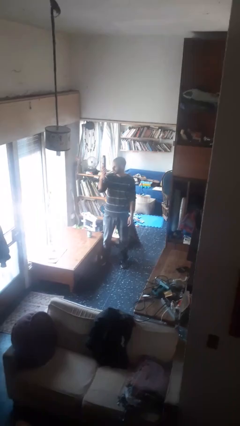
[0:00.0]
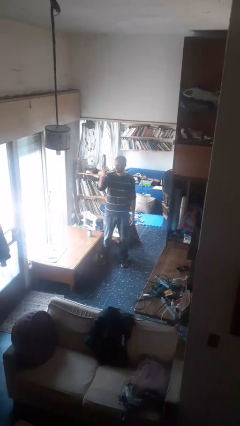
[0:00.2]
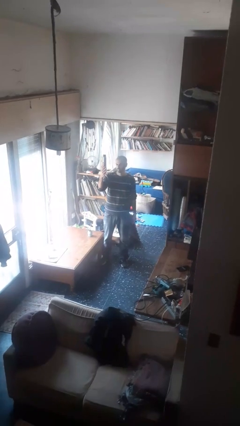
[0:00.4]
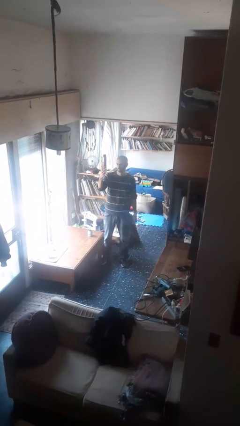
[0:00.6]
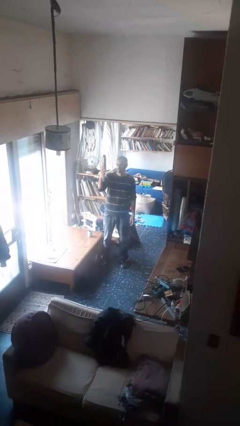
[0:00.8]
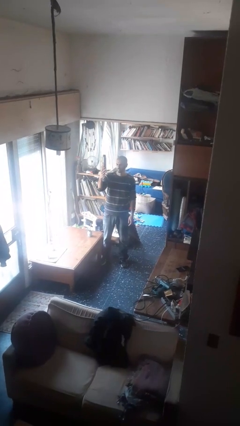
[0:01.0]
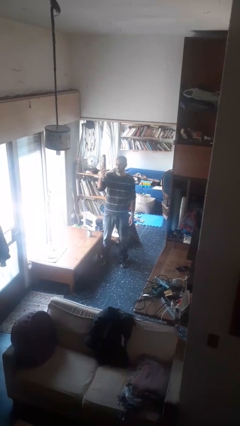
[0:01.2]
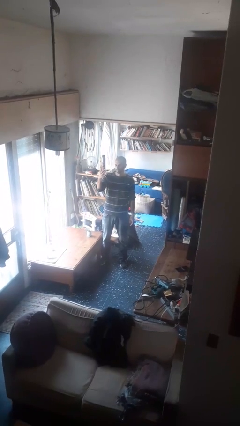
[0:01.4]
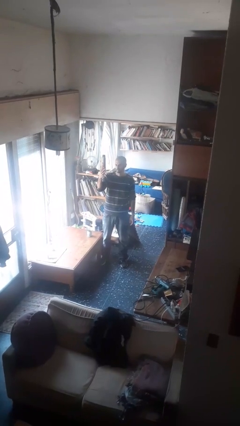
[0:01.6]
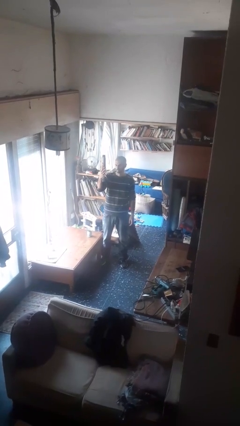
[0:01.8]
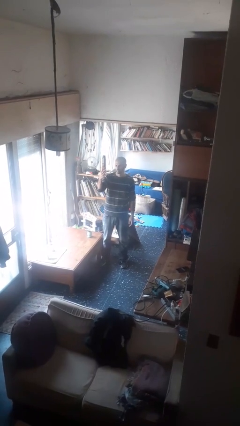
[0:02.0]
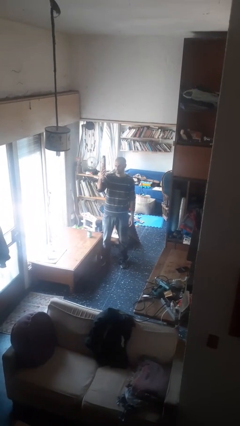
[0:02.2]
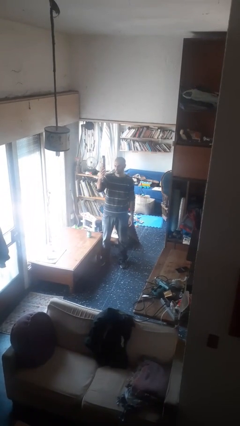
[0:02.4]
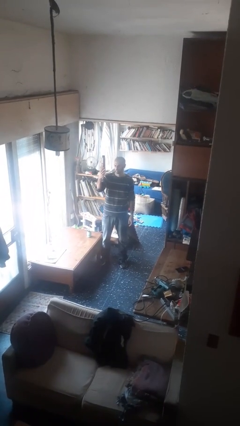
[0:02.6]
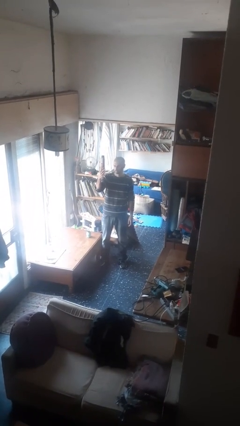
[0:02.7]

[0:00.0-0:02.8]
person gestures number four

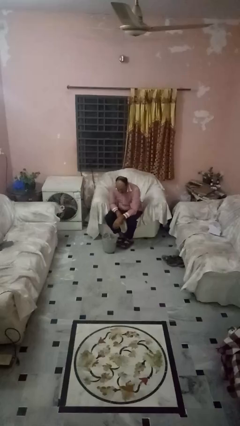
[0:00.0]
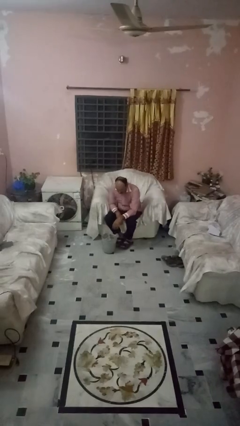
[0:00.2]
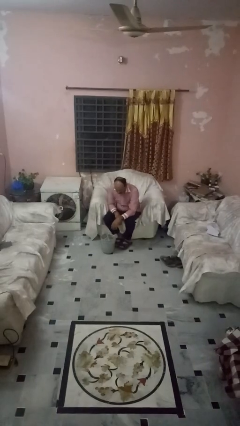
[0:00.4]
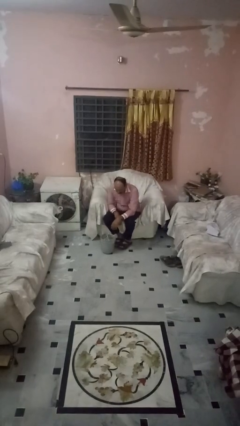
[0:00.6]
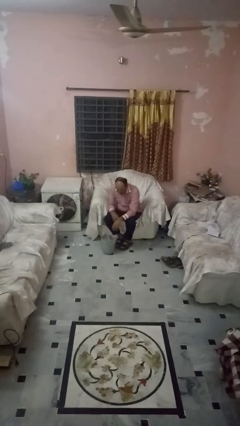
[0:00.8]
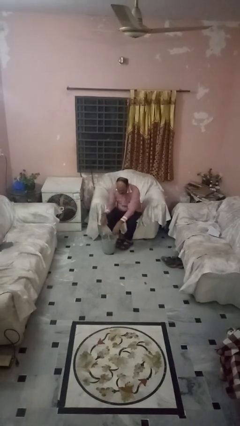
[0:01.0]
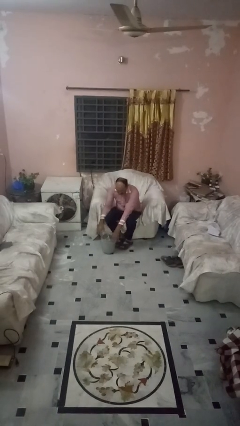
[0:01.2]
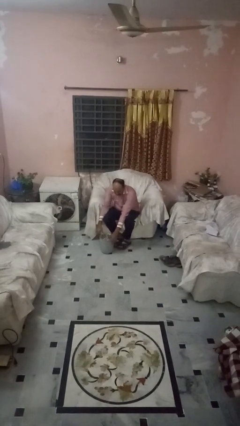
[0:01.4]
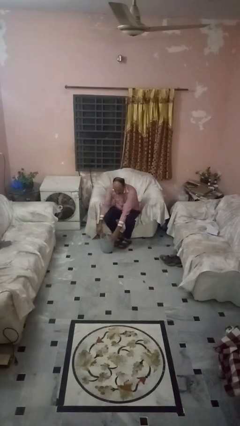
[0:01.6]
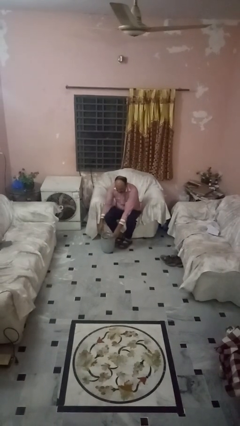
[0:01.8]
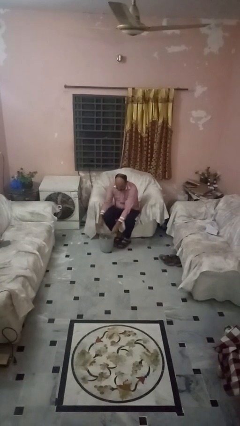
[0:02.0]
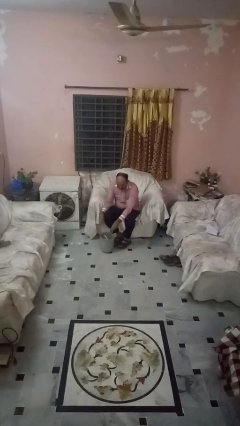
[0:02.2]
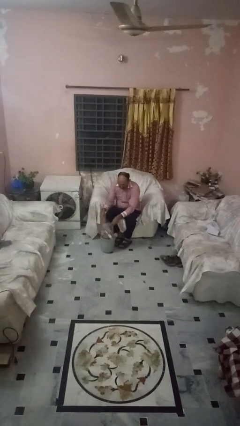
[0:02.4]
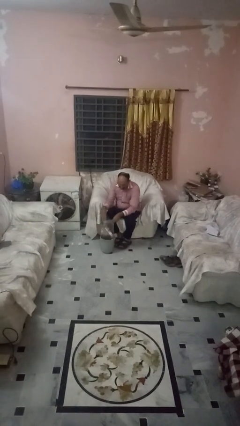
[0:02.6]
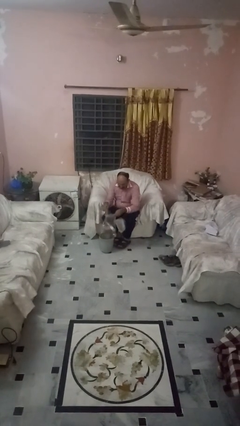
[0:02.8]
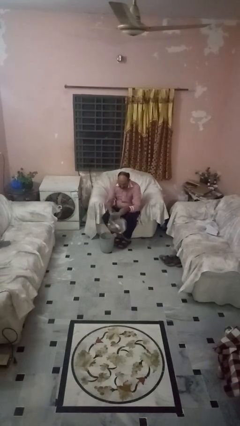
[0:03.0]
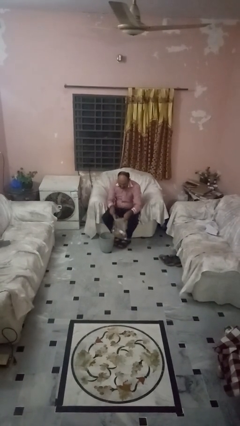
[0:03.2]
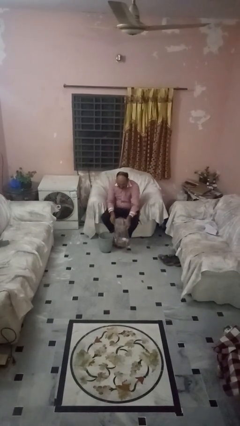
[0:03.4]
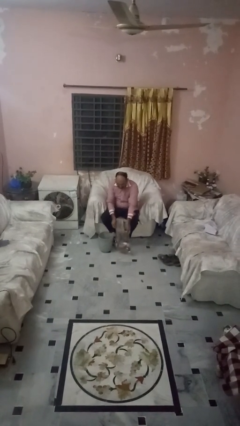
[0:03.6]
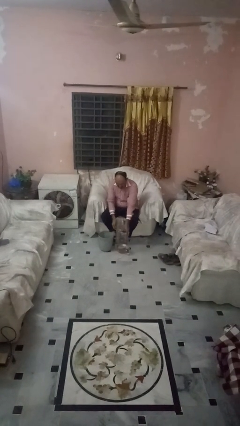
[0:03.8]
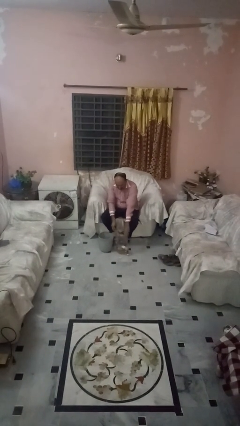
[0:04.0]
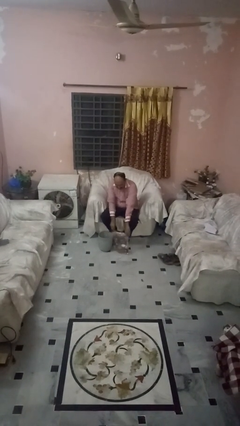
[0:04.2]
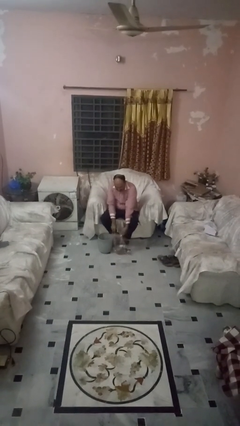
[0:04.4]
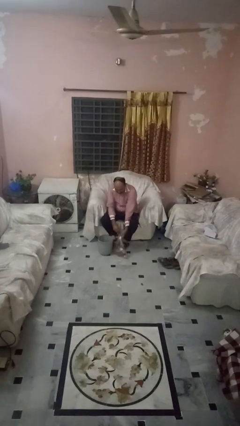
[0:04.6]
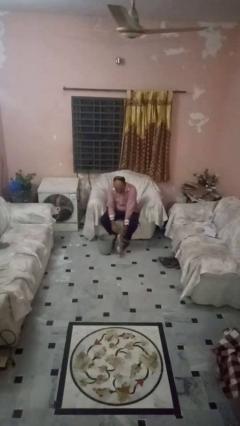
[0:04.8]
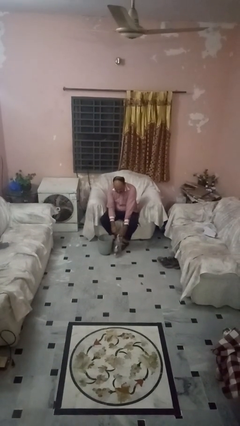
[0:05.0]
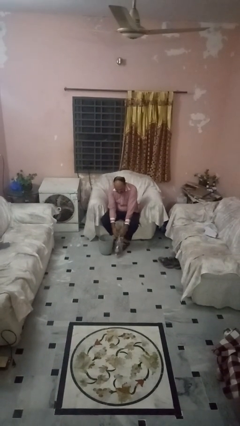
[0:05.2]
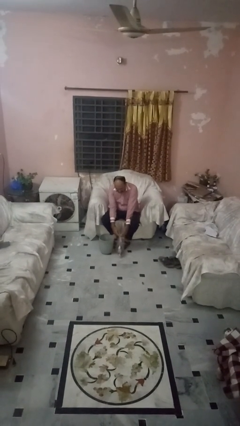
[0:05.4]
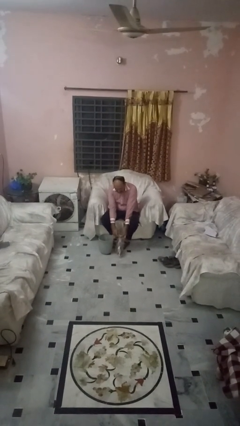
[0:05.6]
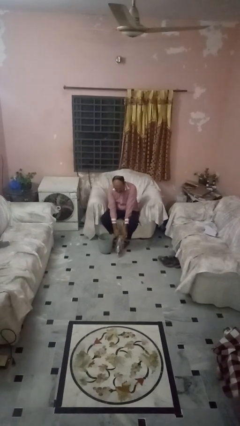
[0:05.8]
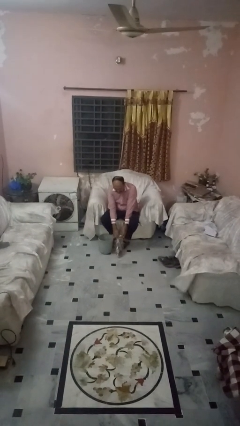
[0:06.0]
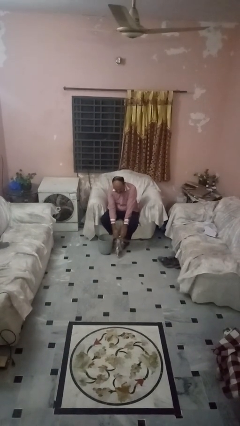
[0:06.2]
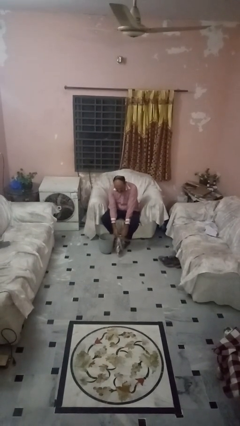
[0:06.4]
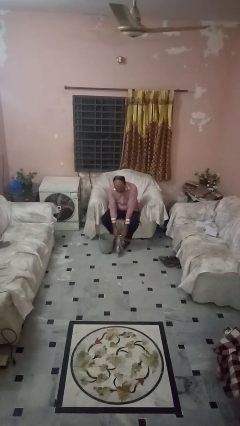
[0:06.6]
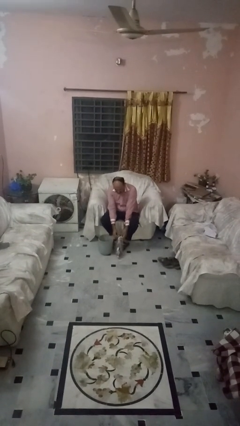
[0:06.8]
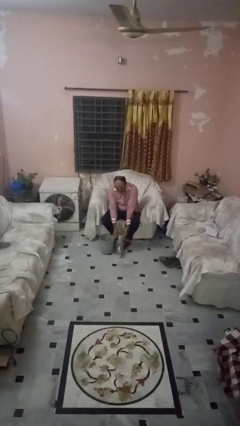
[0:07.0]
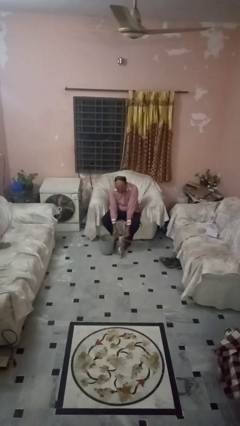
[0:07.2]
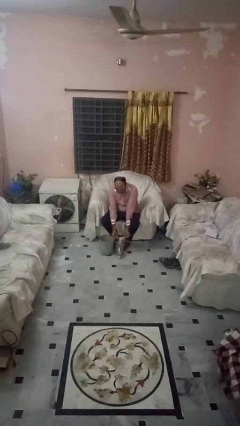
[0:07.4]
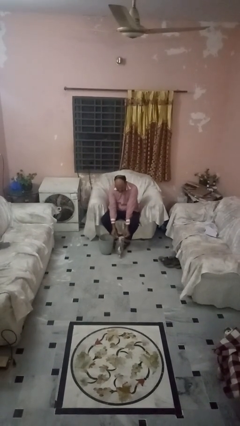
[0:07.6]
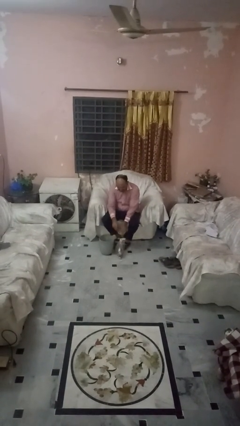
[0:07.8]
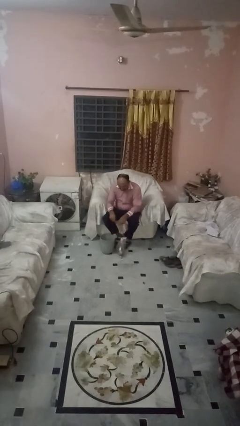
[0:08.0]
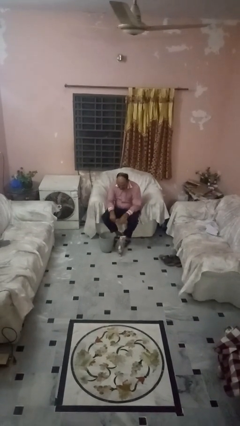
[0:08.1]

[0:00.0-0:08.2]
person removes trashbag from trashcan

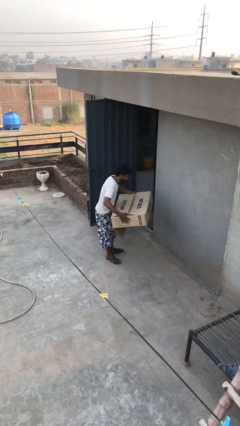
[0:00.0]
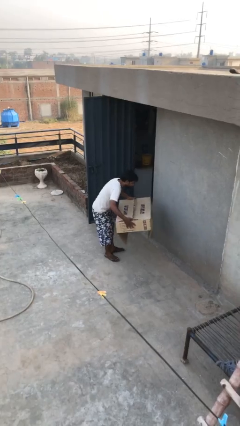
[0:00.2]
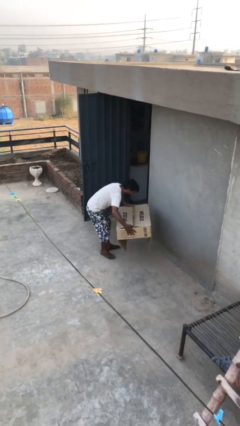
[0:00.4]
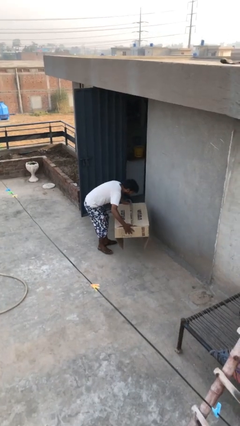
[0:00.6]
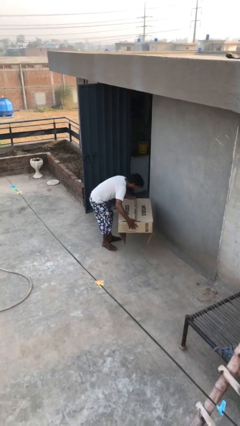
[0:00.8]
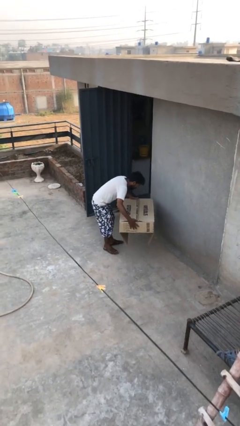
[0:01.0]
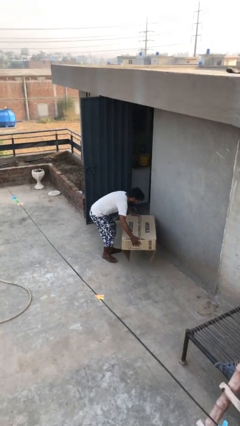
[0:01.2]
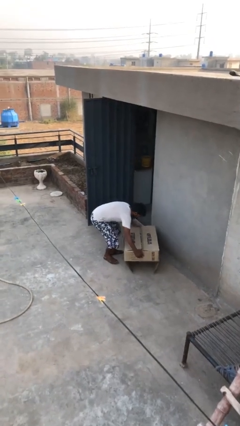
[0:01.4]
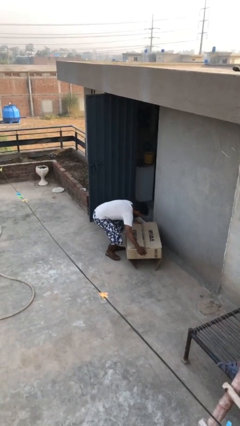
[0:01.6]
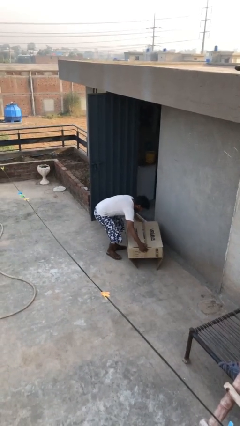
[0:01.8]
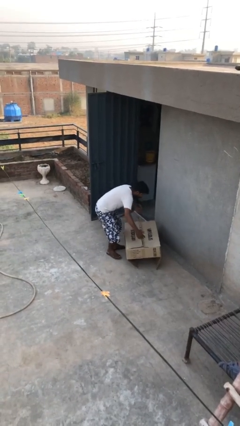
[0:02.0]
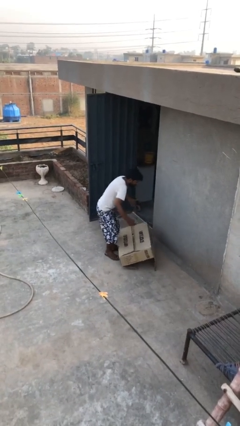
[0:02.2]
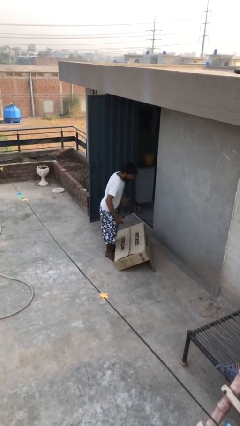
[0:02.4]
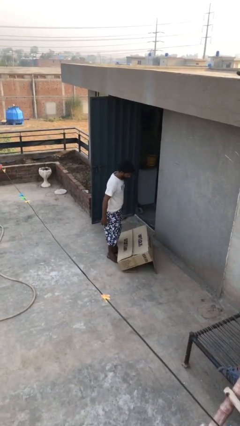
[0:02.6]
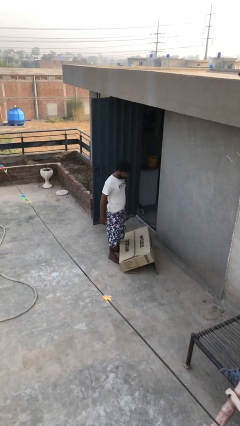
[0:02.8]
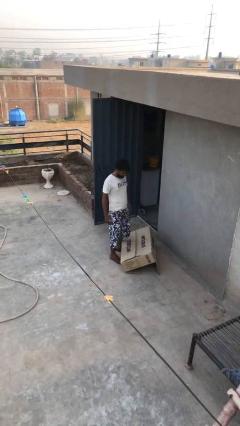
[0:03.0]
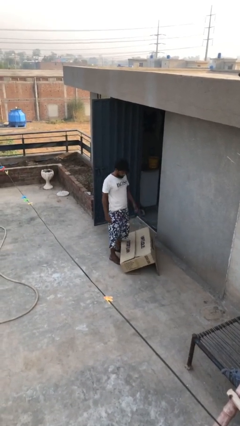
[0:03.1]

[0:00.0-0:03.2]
person puts down object on floor

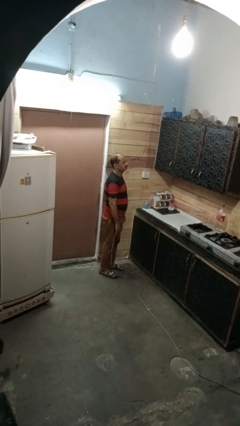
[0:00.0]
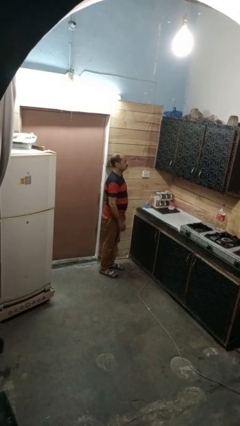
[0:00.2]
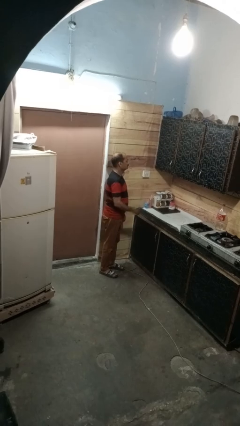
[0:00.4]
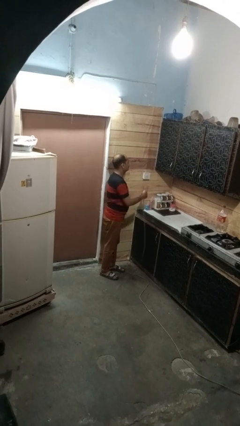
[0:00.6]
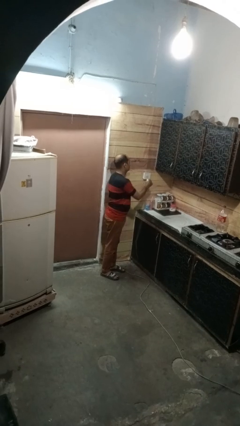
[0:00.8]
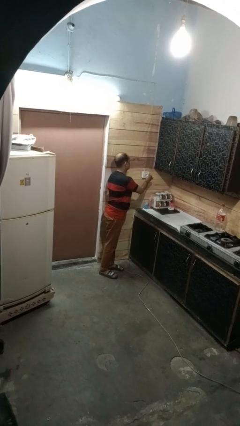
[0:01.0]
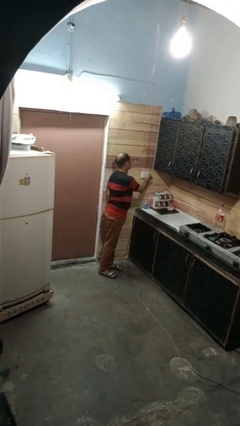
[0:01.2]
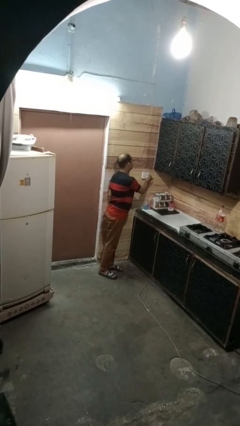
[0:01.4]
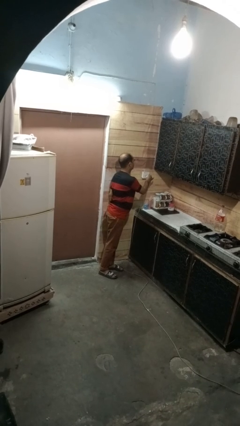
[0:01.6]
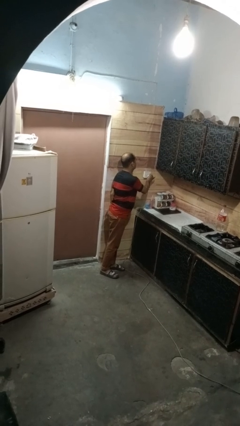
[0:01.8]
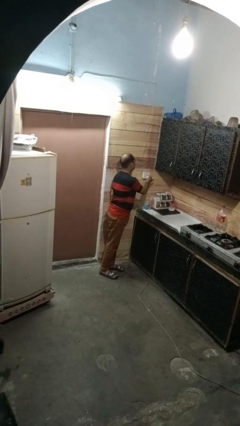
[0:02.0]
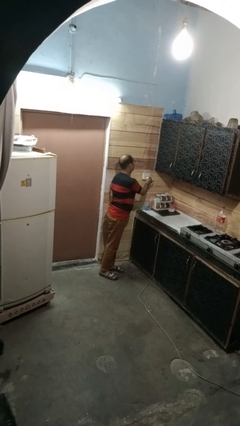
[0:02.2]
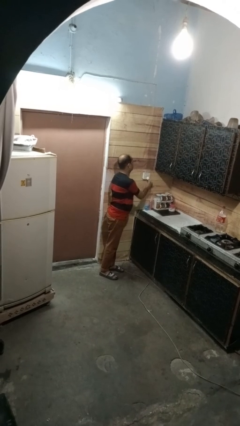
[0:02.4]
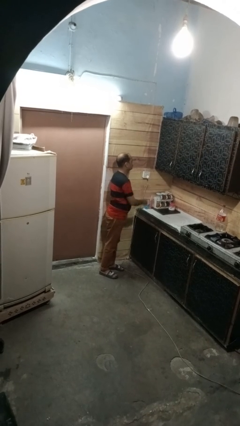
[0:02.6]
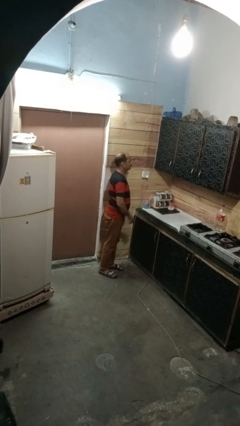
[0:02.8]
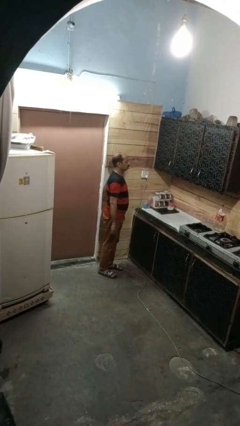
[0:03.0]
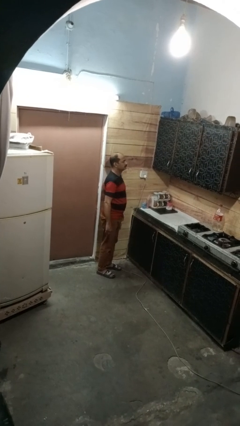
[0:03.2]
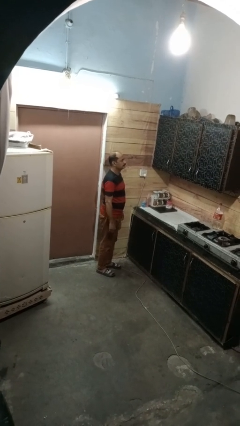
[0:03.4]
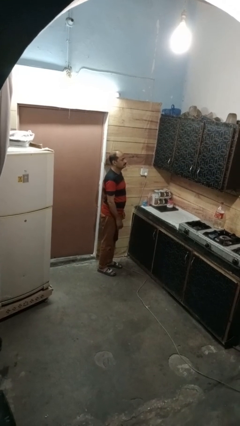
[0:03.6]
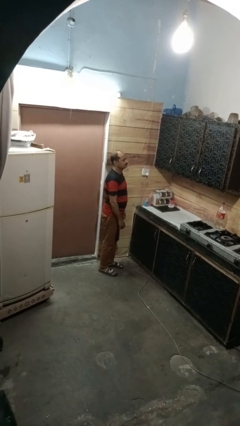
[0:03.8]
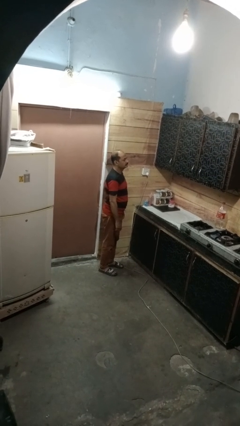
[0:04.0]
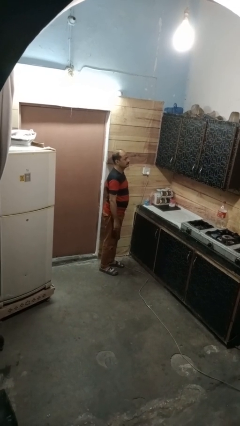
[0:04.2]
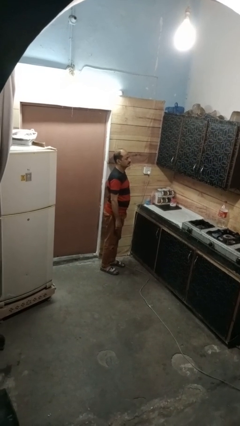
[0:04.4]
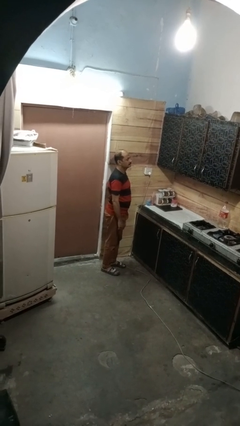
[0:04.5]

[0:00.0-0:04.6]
person plugs into electrical socket
